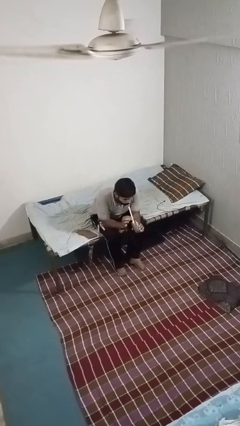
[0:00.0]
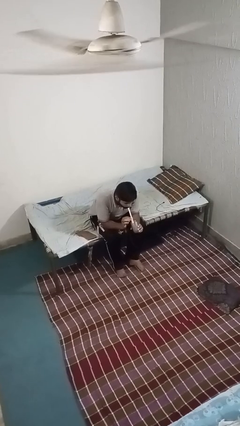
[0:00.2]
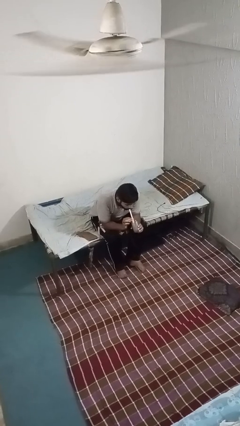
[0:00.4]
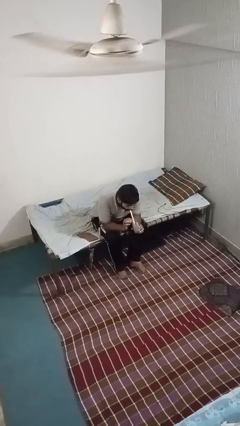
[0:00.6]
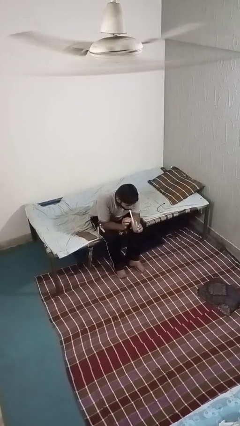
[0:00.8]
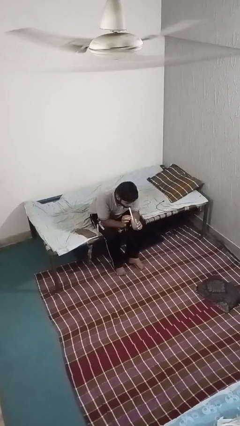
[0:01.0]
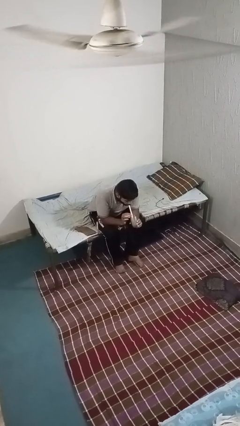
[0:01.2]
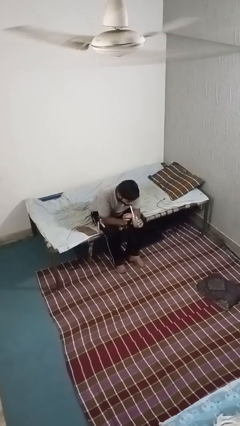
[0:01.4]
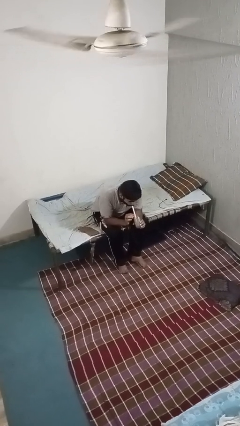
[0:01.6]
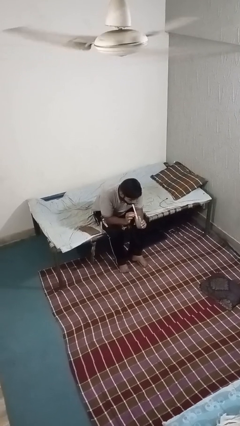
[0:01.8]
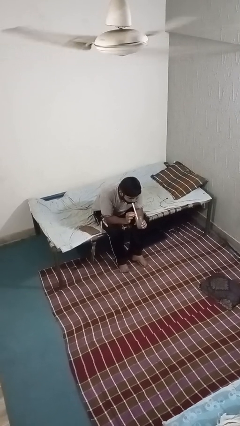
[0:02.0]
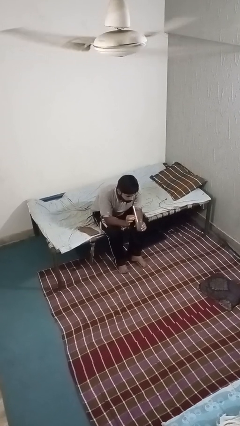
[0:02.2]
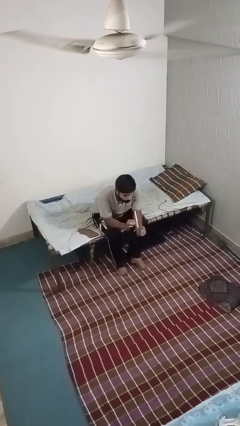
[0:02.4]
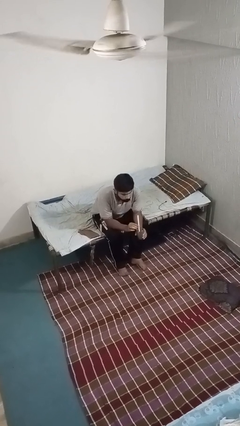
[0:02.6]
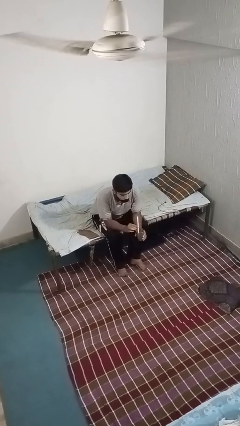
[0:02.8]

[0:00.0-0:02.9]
person drinks from straw

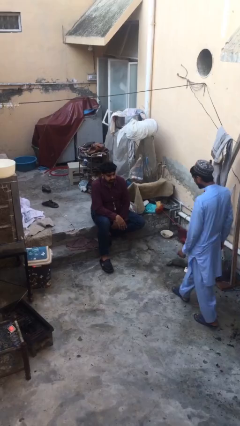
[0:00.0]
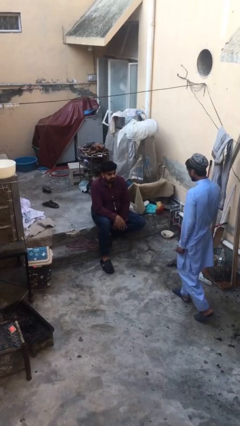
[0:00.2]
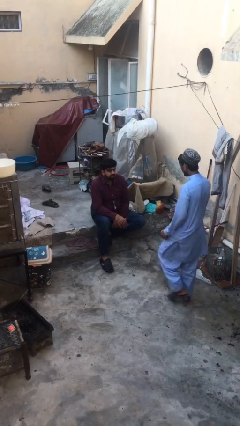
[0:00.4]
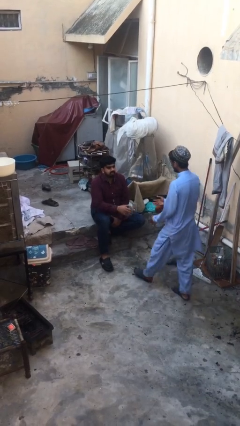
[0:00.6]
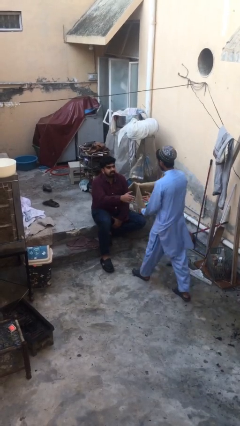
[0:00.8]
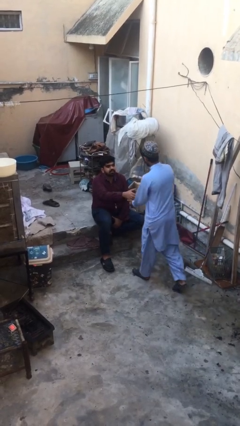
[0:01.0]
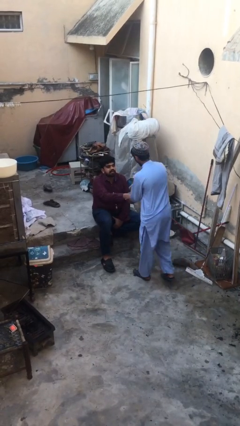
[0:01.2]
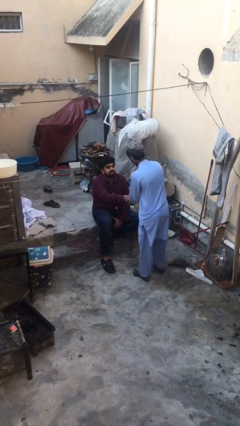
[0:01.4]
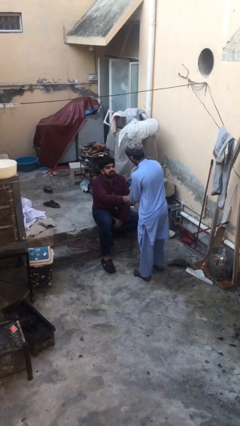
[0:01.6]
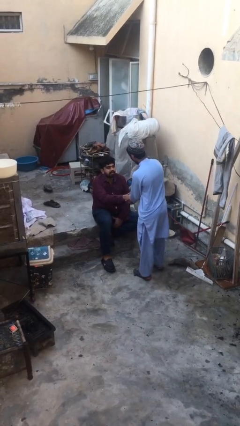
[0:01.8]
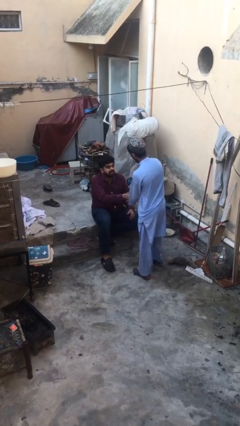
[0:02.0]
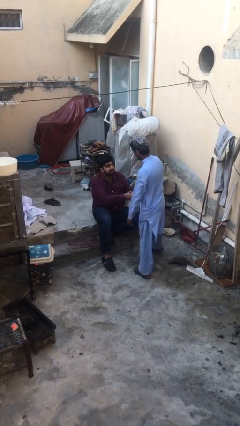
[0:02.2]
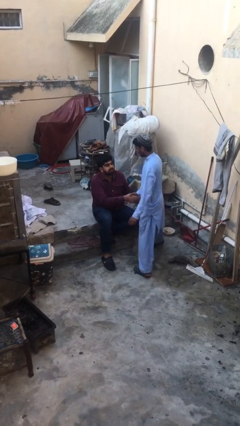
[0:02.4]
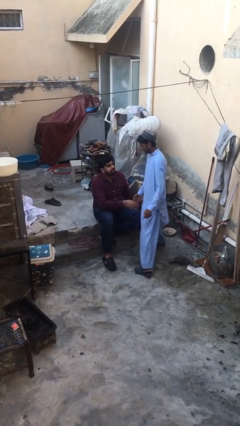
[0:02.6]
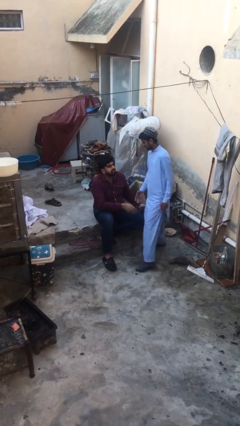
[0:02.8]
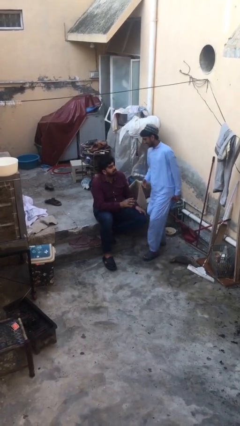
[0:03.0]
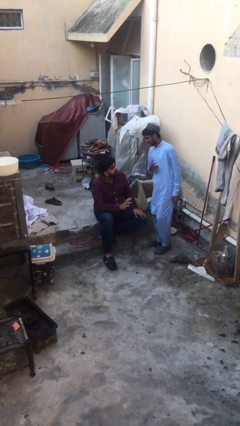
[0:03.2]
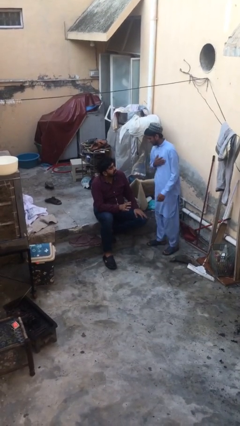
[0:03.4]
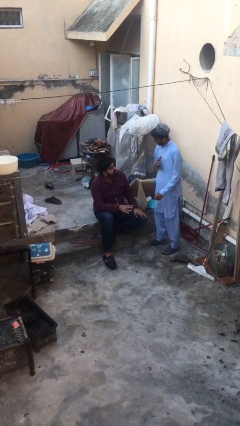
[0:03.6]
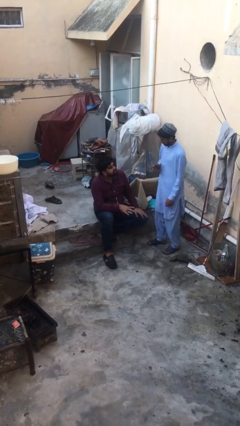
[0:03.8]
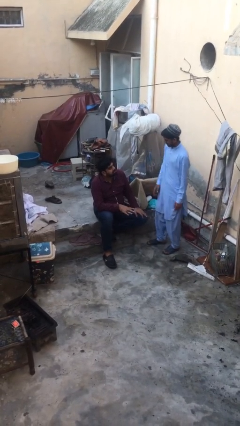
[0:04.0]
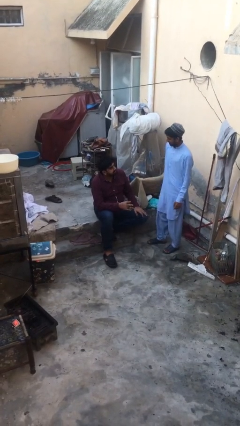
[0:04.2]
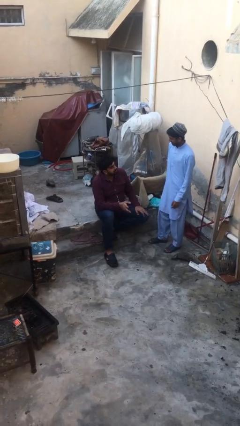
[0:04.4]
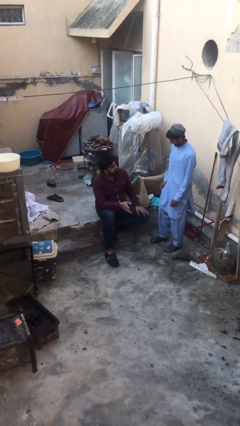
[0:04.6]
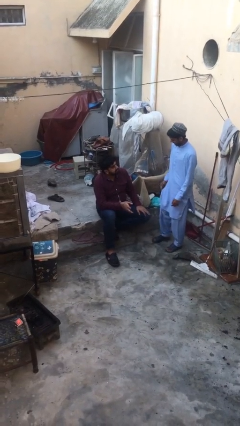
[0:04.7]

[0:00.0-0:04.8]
person shakes hand

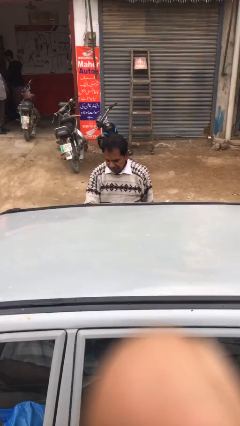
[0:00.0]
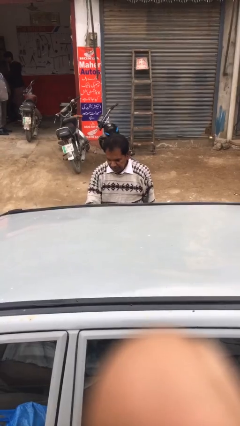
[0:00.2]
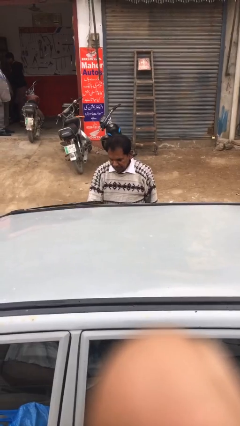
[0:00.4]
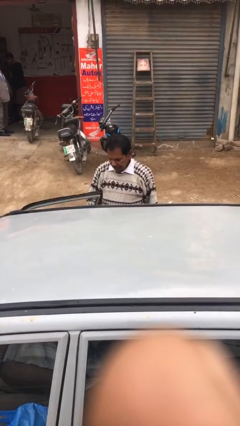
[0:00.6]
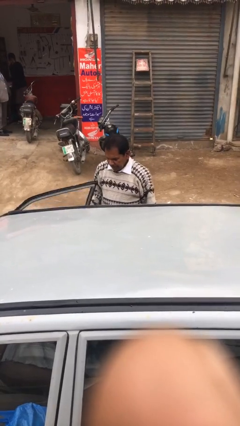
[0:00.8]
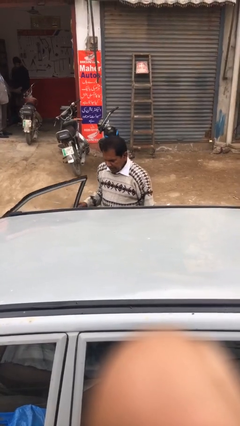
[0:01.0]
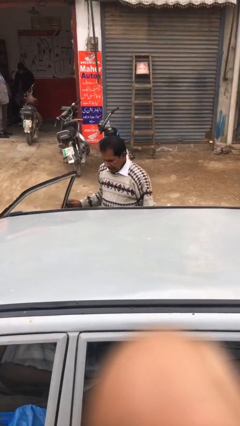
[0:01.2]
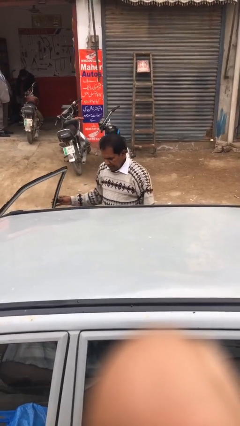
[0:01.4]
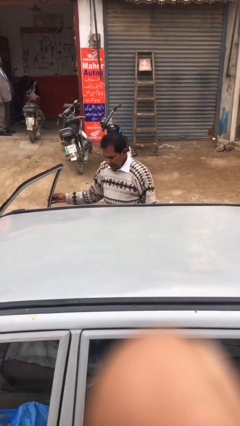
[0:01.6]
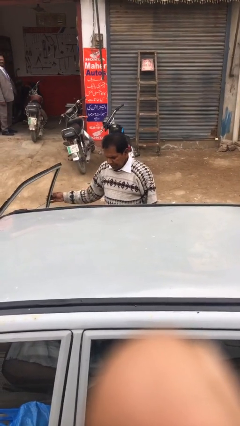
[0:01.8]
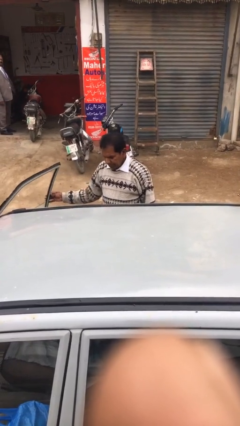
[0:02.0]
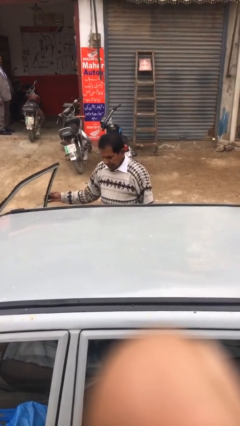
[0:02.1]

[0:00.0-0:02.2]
person opens car door

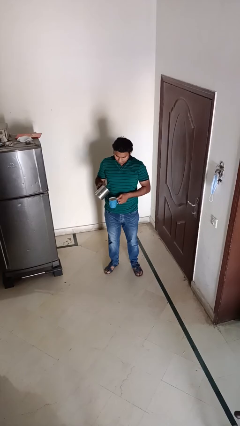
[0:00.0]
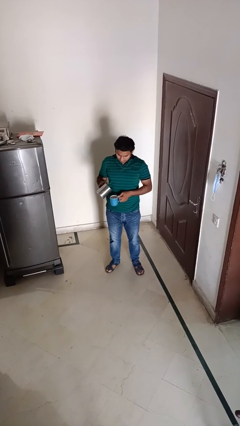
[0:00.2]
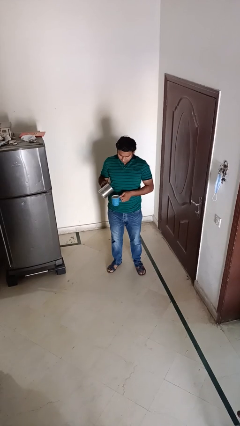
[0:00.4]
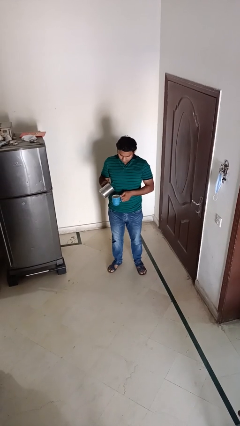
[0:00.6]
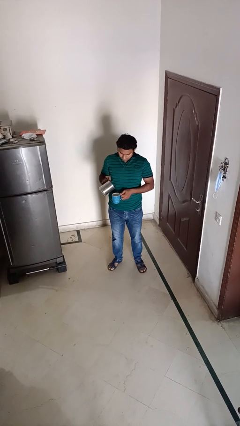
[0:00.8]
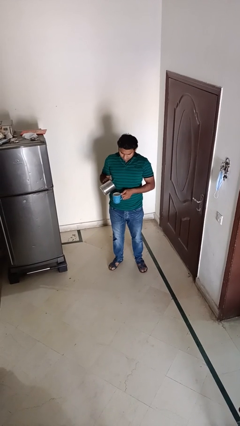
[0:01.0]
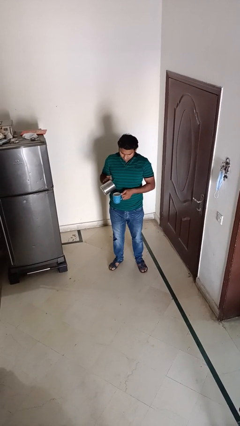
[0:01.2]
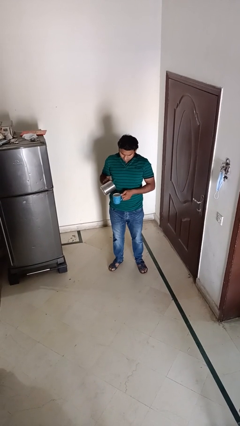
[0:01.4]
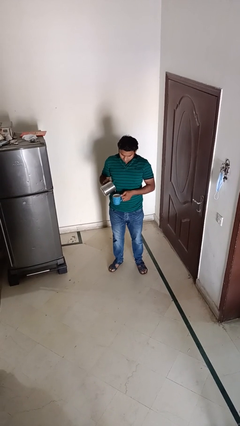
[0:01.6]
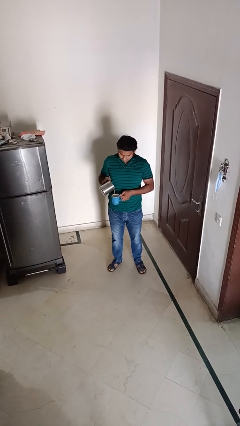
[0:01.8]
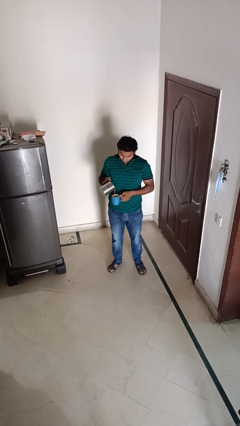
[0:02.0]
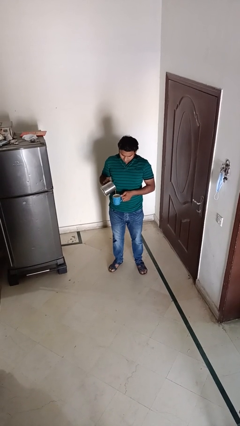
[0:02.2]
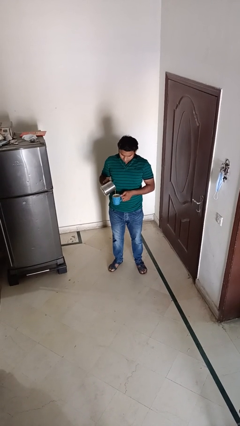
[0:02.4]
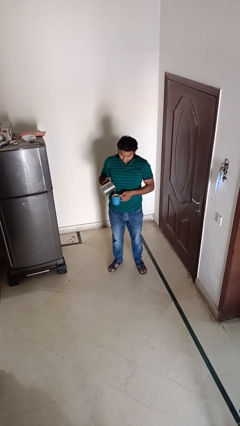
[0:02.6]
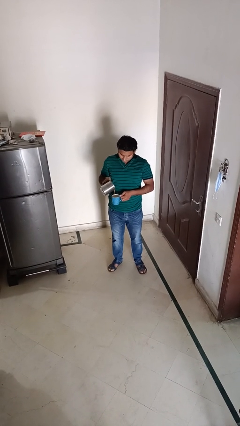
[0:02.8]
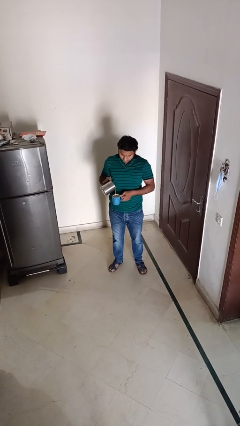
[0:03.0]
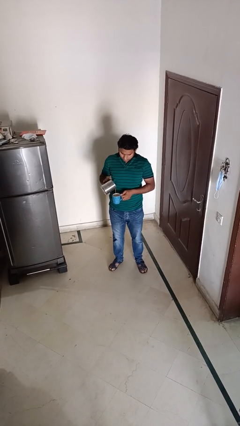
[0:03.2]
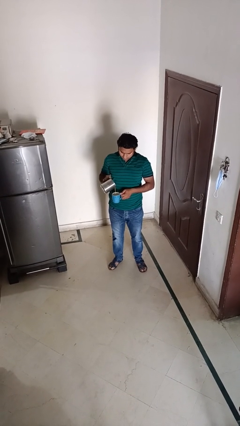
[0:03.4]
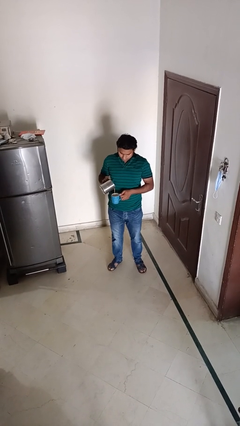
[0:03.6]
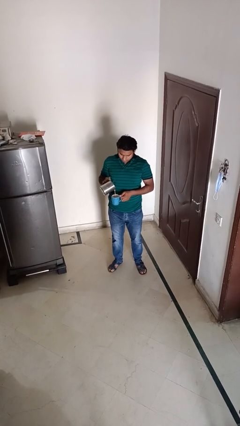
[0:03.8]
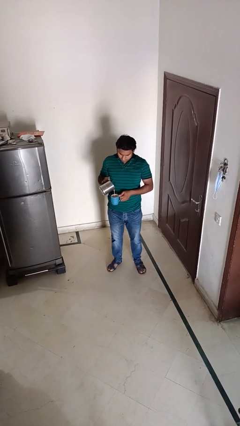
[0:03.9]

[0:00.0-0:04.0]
person pours coffee into mug

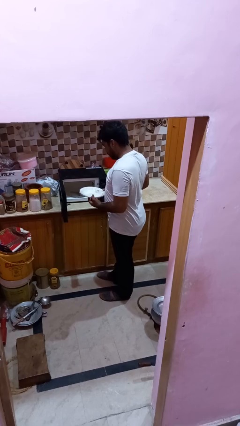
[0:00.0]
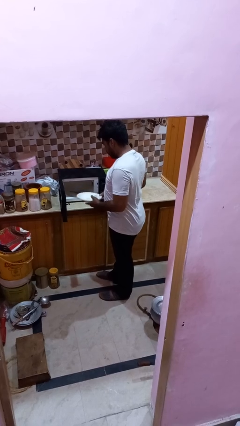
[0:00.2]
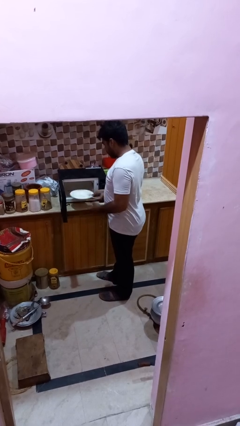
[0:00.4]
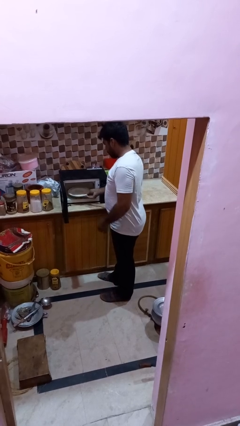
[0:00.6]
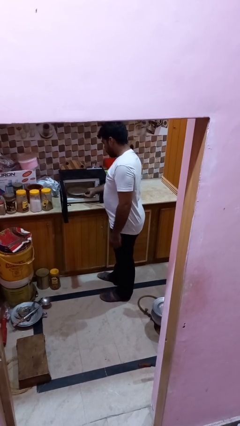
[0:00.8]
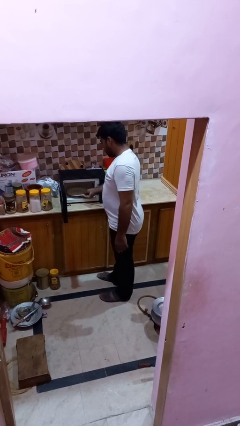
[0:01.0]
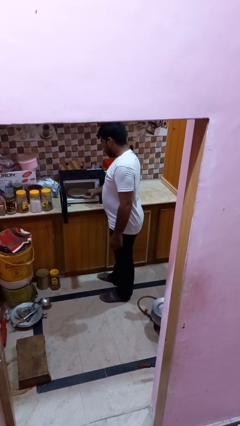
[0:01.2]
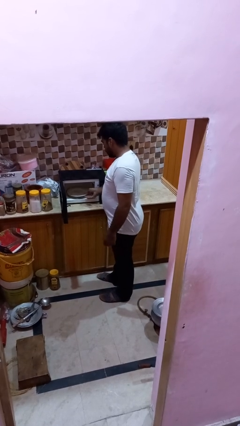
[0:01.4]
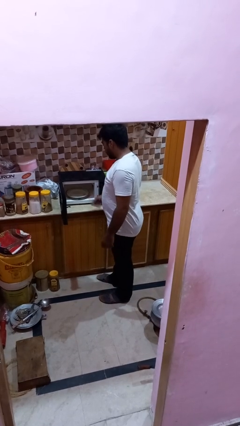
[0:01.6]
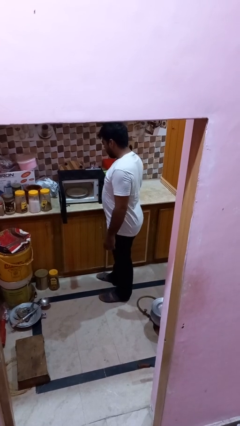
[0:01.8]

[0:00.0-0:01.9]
person puts object into oven

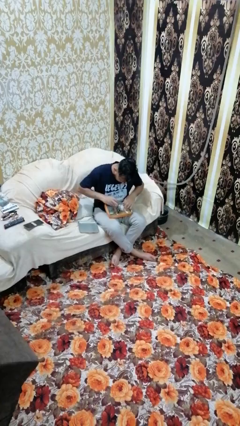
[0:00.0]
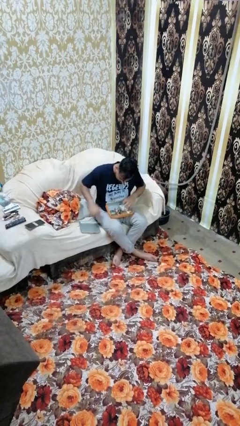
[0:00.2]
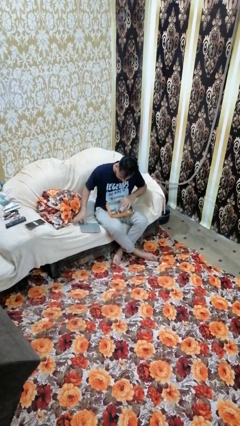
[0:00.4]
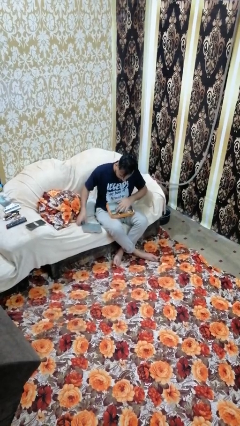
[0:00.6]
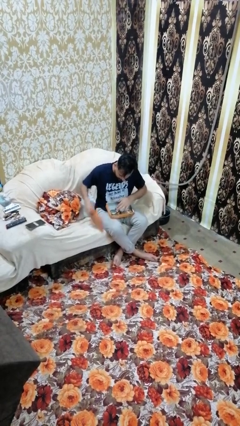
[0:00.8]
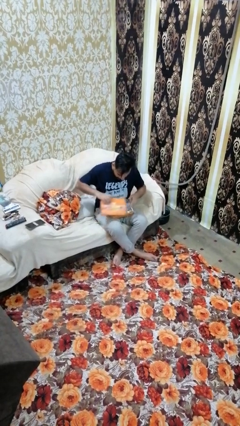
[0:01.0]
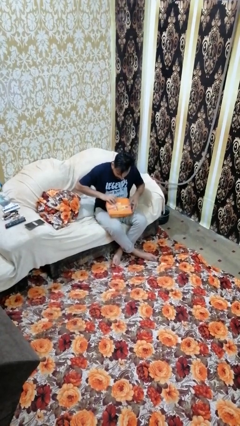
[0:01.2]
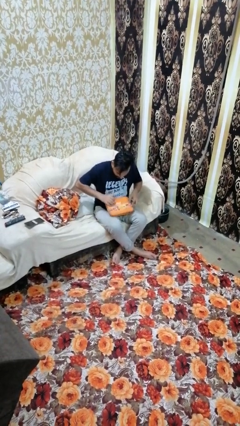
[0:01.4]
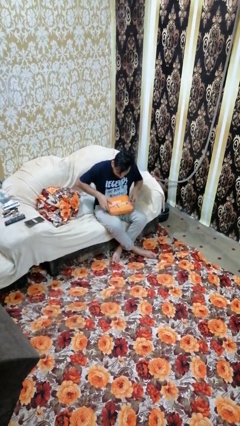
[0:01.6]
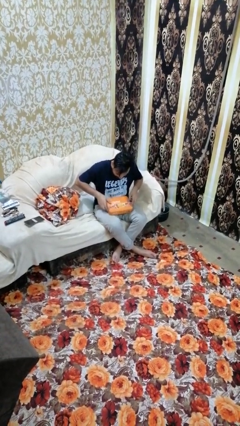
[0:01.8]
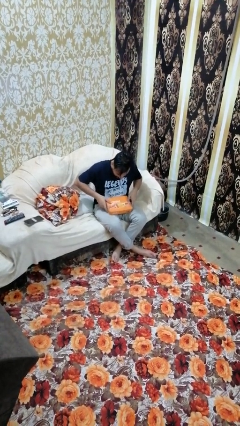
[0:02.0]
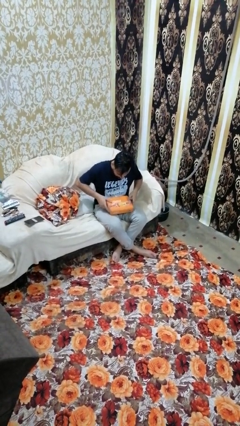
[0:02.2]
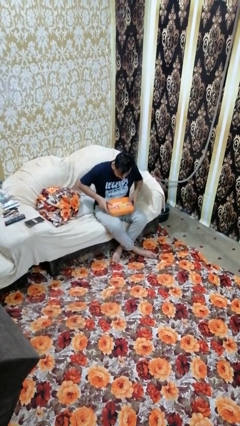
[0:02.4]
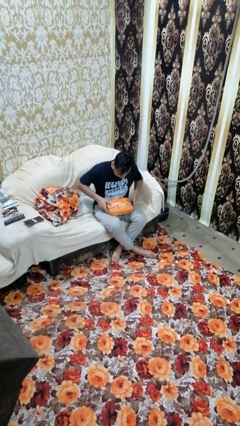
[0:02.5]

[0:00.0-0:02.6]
person closes jewelry box
